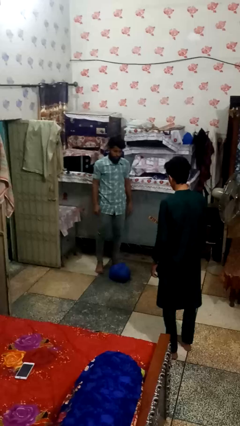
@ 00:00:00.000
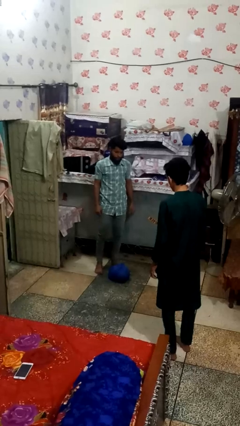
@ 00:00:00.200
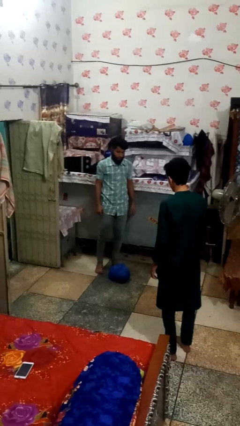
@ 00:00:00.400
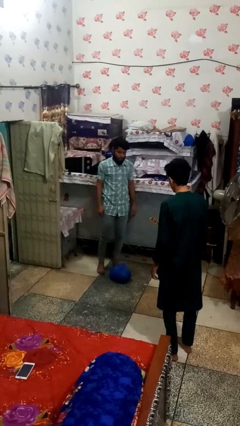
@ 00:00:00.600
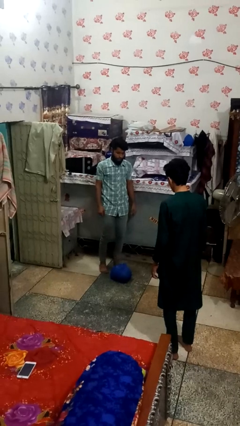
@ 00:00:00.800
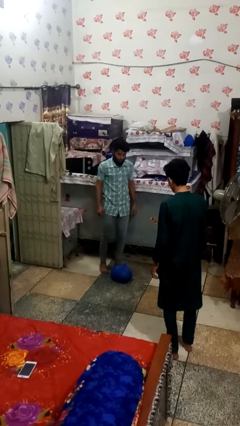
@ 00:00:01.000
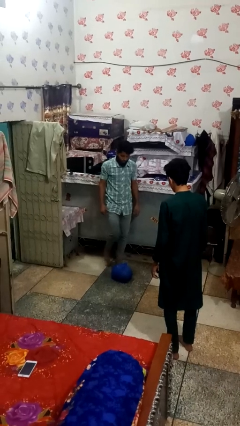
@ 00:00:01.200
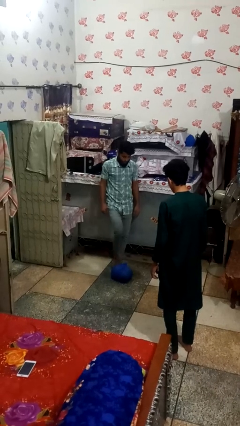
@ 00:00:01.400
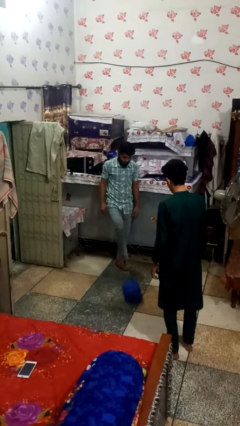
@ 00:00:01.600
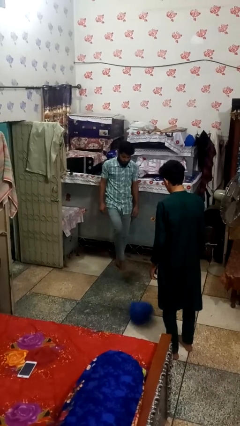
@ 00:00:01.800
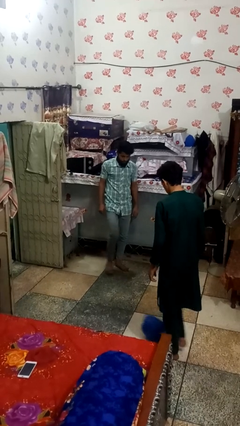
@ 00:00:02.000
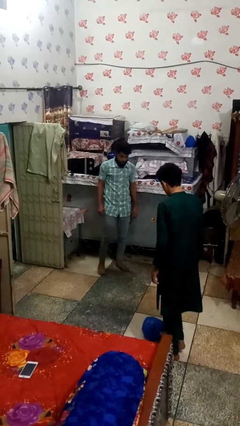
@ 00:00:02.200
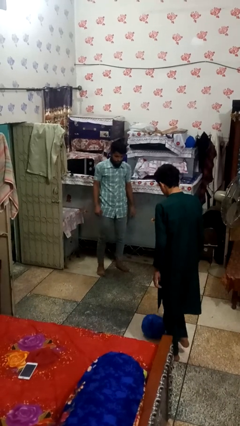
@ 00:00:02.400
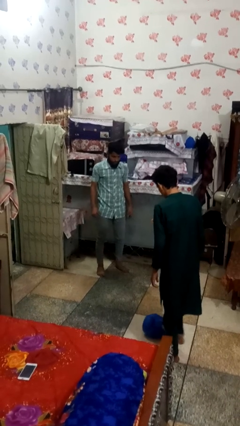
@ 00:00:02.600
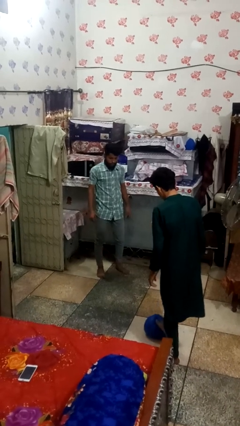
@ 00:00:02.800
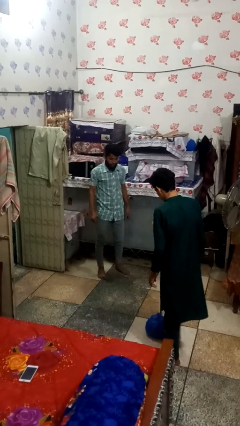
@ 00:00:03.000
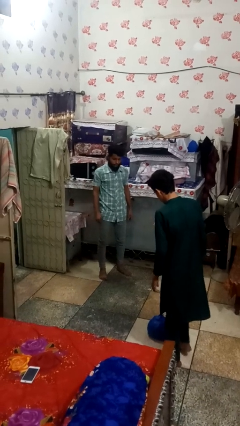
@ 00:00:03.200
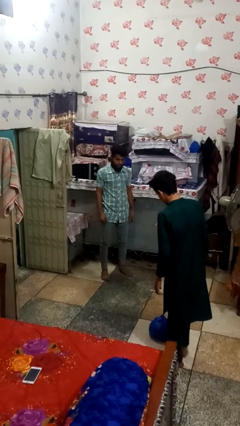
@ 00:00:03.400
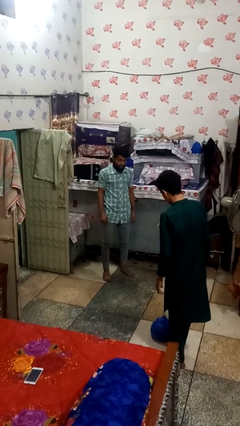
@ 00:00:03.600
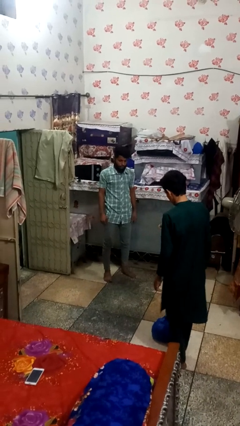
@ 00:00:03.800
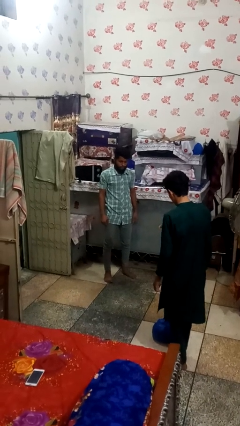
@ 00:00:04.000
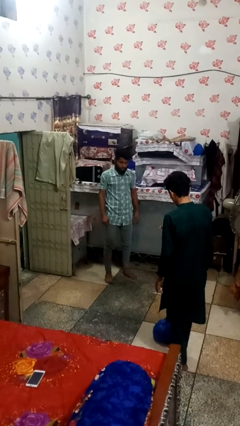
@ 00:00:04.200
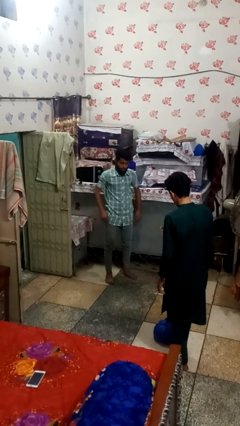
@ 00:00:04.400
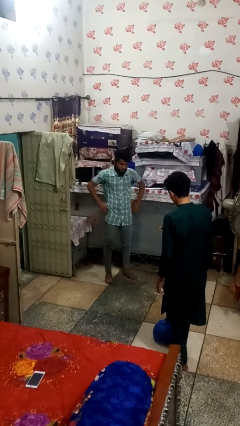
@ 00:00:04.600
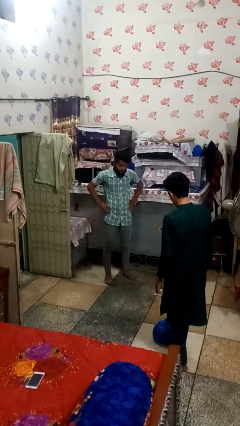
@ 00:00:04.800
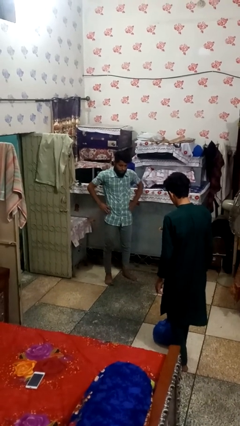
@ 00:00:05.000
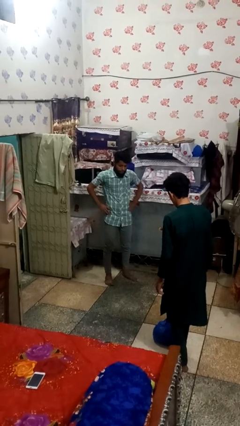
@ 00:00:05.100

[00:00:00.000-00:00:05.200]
person kicks object to person

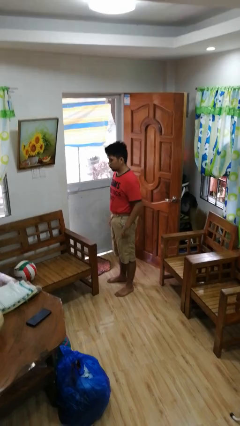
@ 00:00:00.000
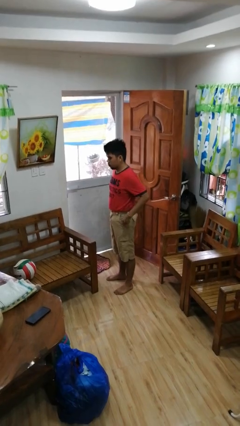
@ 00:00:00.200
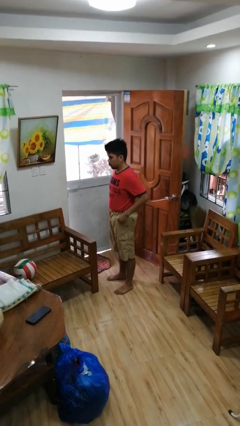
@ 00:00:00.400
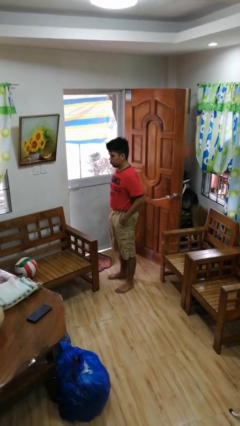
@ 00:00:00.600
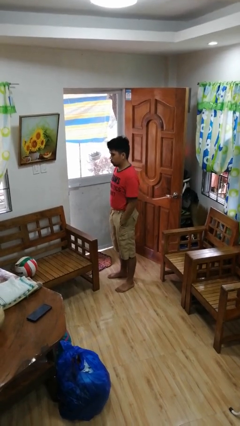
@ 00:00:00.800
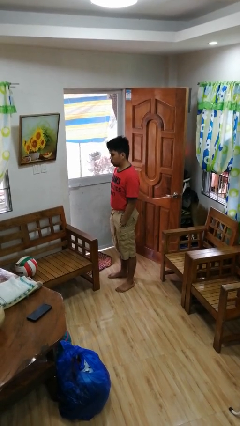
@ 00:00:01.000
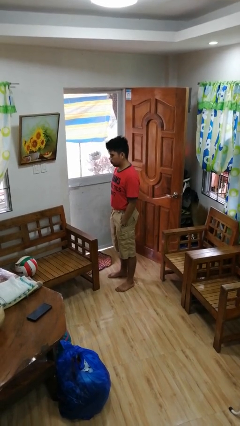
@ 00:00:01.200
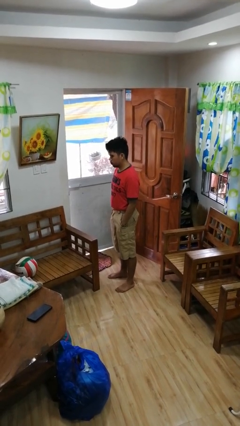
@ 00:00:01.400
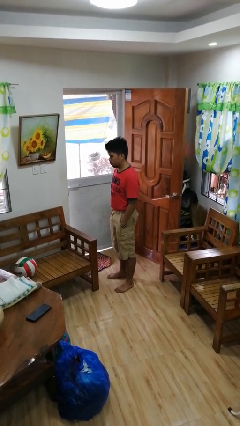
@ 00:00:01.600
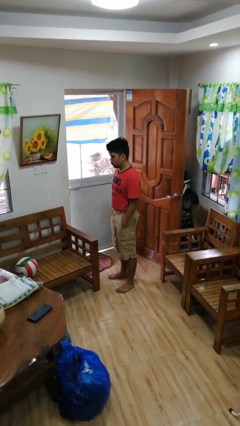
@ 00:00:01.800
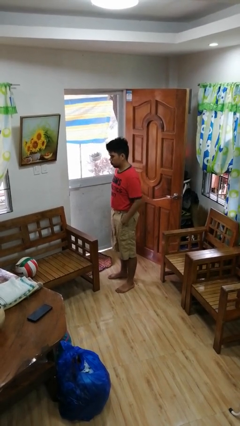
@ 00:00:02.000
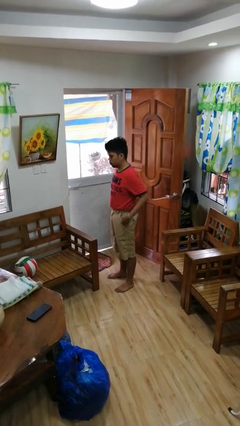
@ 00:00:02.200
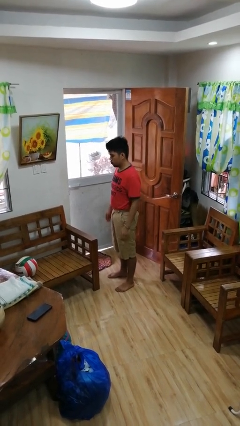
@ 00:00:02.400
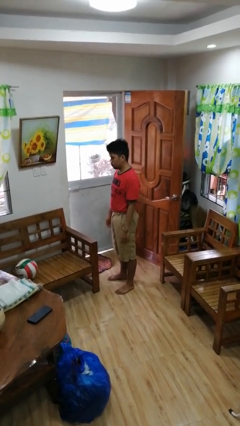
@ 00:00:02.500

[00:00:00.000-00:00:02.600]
person puts hands in back pockets

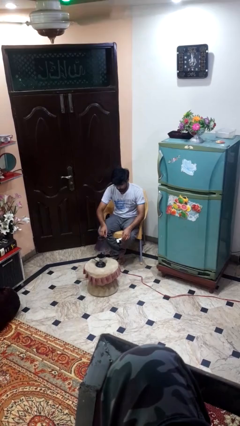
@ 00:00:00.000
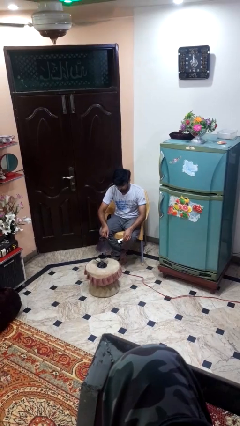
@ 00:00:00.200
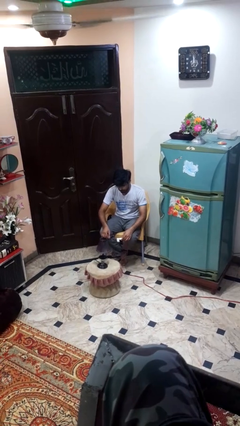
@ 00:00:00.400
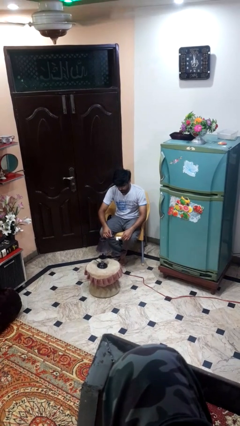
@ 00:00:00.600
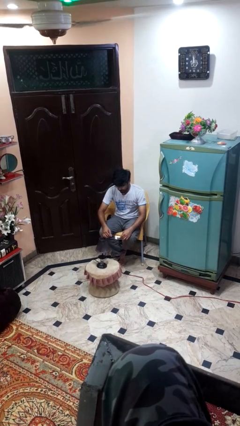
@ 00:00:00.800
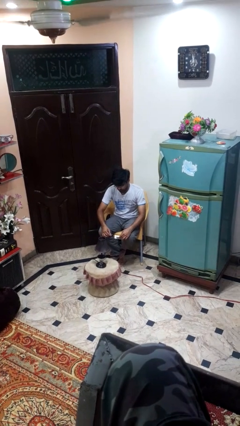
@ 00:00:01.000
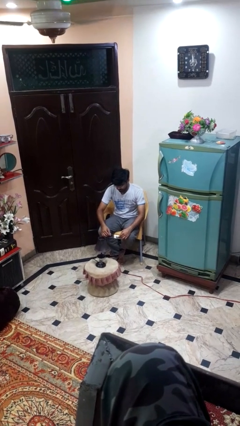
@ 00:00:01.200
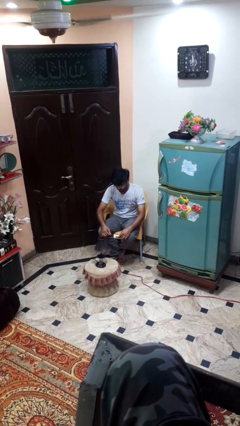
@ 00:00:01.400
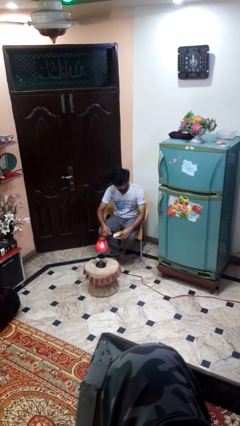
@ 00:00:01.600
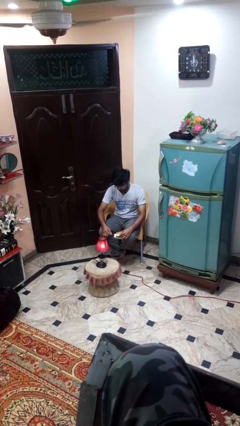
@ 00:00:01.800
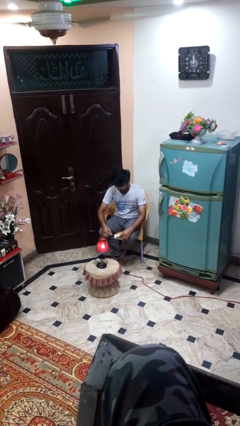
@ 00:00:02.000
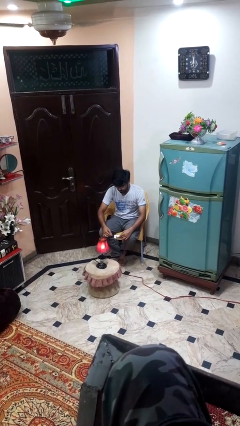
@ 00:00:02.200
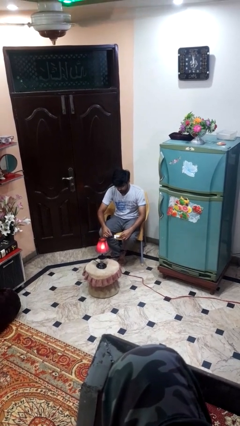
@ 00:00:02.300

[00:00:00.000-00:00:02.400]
person turns on lamp

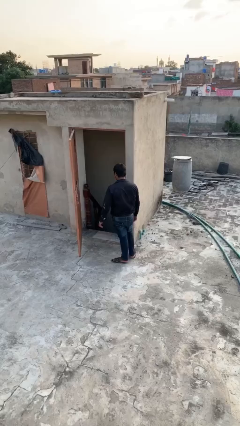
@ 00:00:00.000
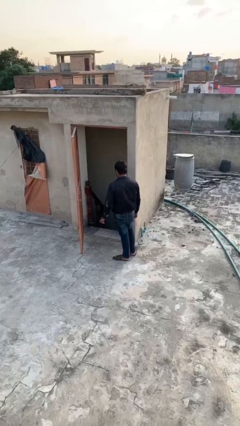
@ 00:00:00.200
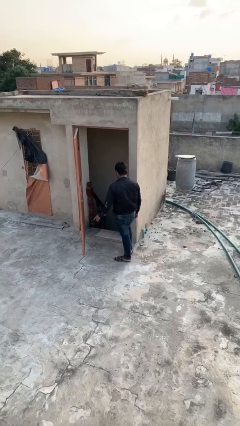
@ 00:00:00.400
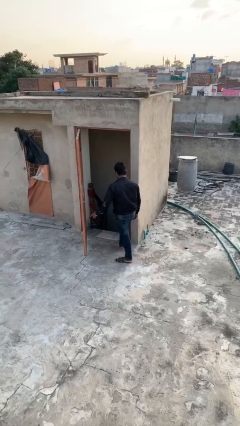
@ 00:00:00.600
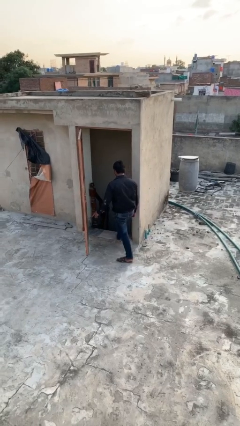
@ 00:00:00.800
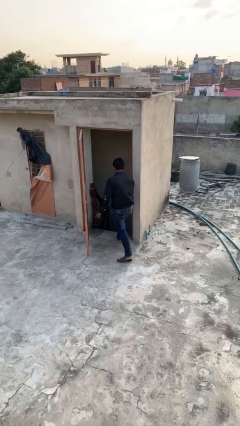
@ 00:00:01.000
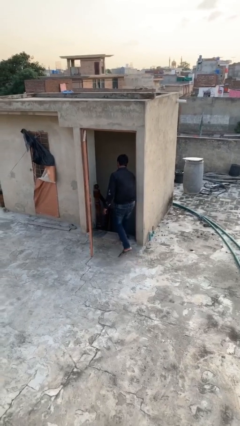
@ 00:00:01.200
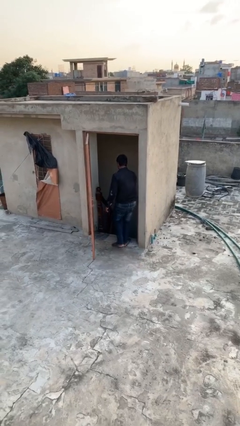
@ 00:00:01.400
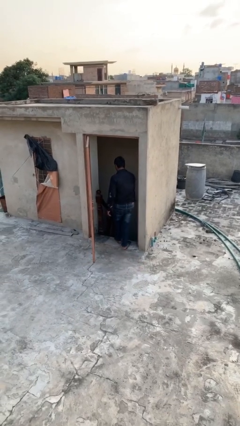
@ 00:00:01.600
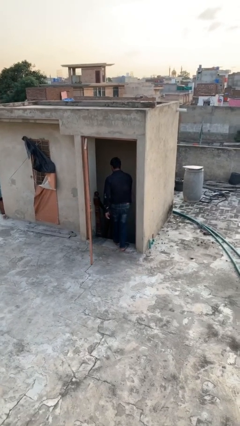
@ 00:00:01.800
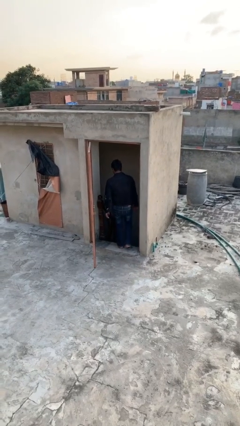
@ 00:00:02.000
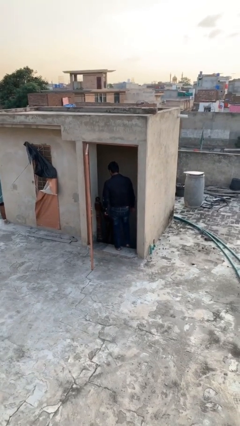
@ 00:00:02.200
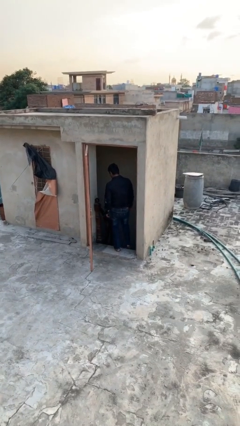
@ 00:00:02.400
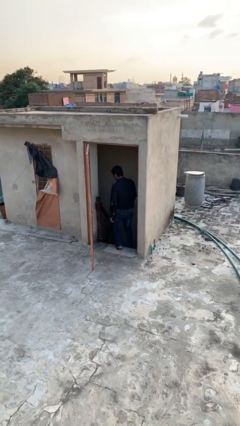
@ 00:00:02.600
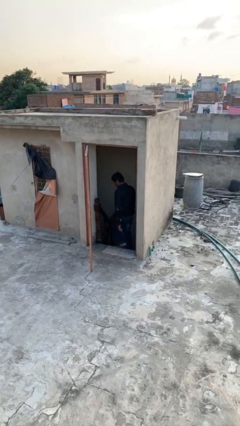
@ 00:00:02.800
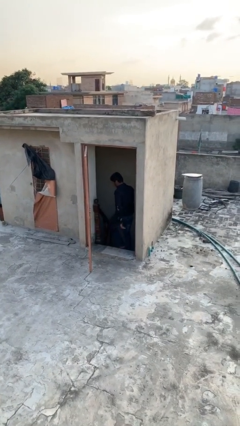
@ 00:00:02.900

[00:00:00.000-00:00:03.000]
person exits scene through structure

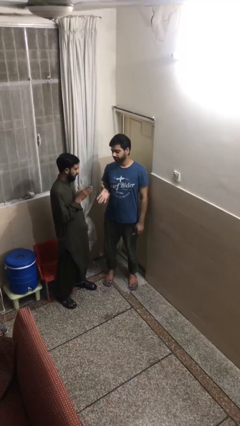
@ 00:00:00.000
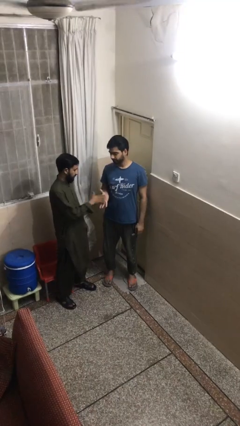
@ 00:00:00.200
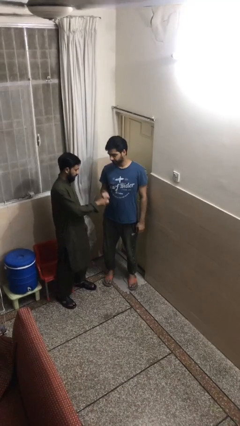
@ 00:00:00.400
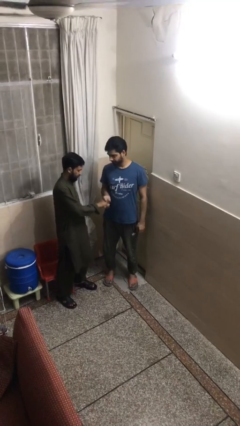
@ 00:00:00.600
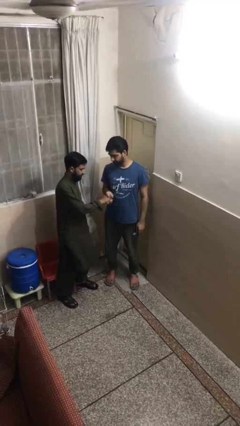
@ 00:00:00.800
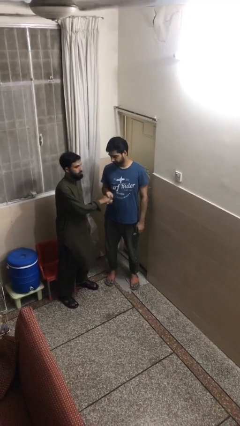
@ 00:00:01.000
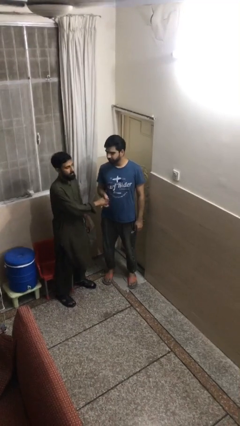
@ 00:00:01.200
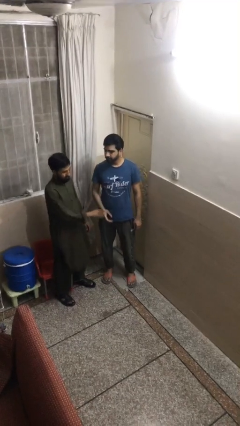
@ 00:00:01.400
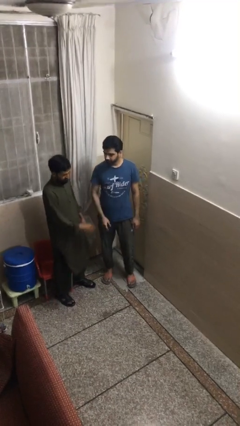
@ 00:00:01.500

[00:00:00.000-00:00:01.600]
person shakes hand

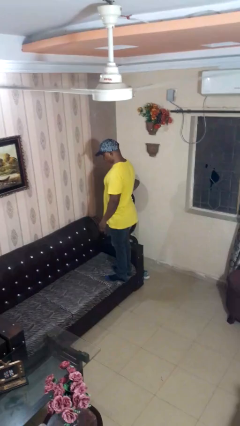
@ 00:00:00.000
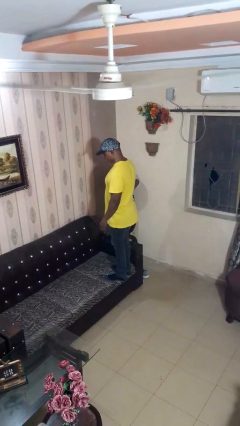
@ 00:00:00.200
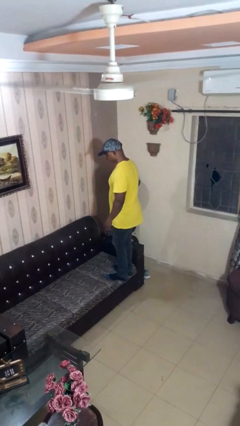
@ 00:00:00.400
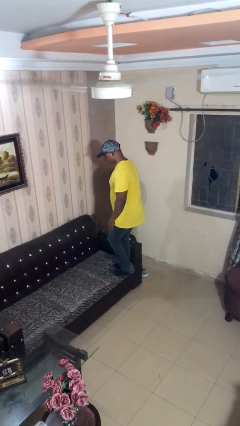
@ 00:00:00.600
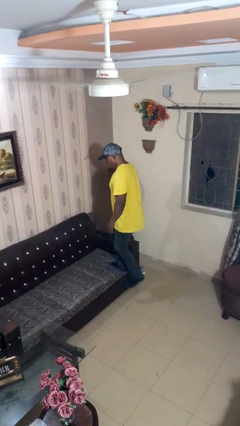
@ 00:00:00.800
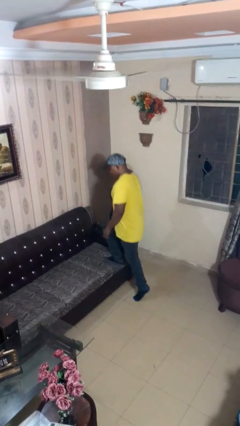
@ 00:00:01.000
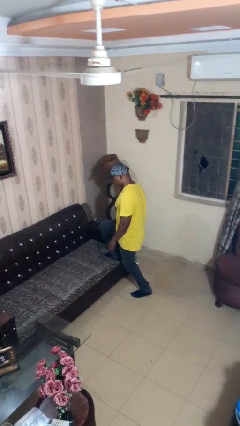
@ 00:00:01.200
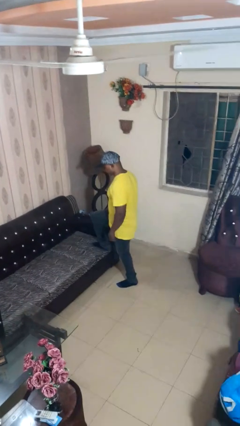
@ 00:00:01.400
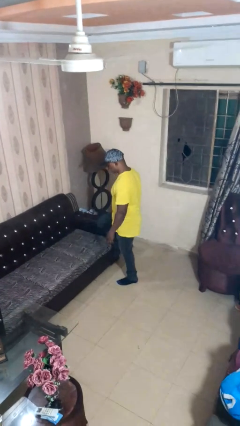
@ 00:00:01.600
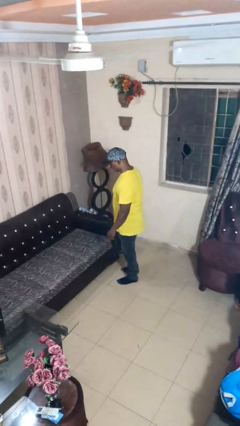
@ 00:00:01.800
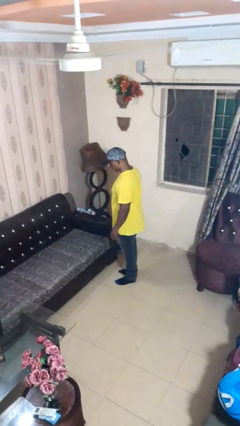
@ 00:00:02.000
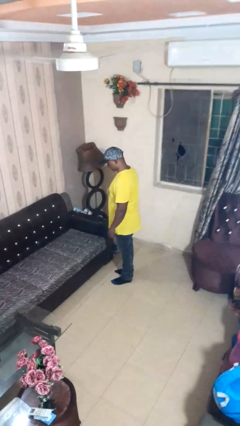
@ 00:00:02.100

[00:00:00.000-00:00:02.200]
person climbs off couch
